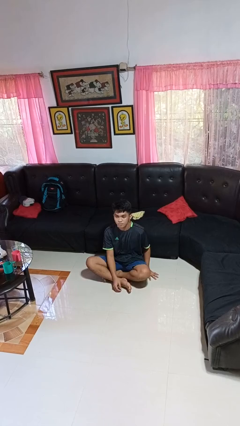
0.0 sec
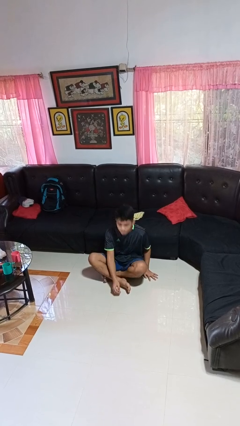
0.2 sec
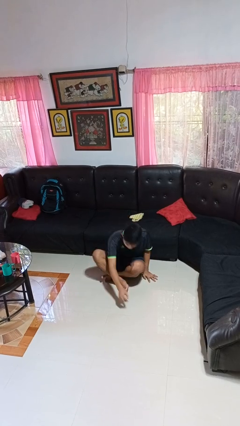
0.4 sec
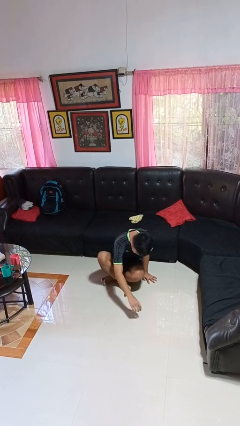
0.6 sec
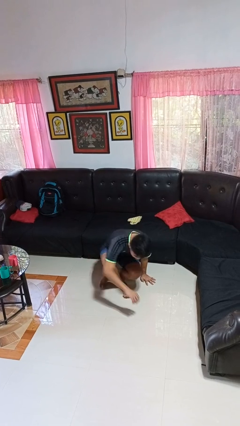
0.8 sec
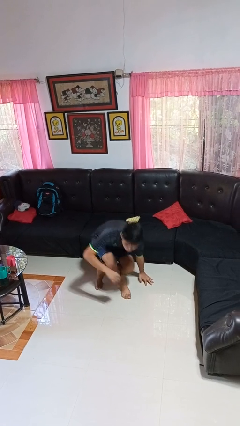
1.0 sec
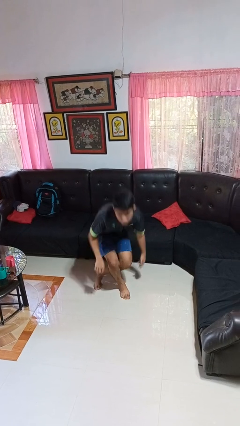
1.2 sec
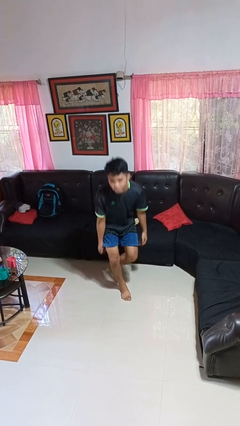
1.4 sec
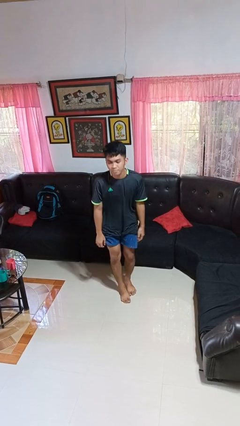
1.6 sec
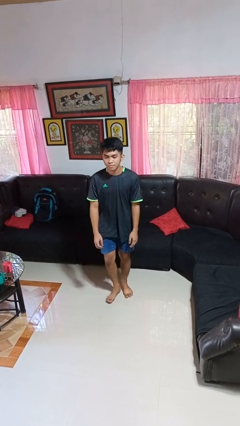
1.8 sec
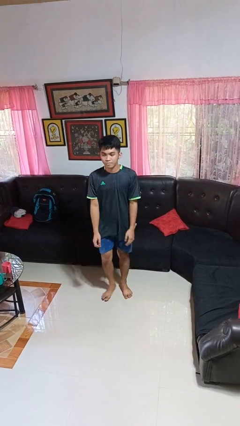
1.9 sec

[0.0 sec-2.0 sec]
person stands up from floor

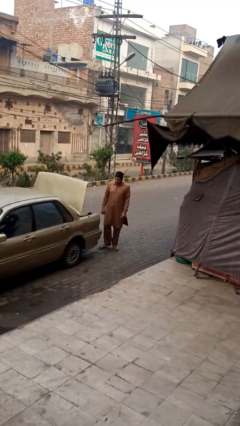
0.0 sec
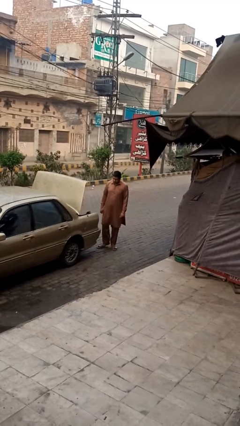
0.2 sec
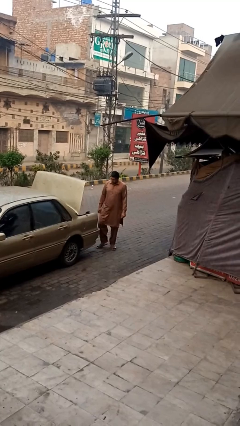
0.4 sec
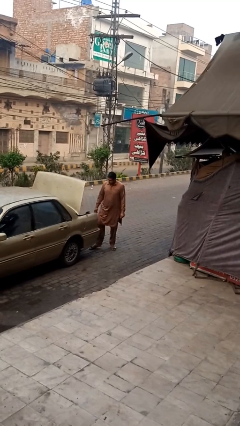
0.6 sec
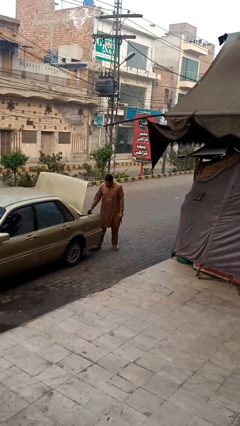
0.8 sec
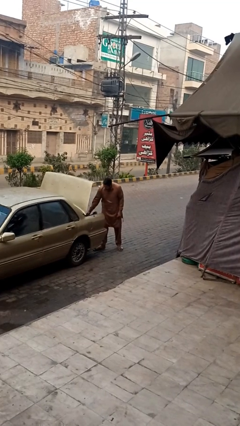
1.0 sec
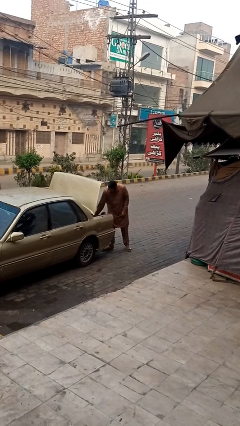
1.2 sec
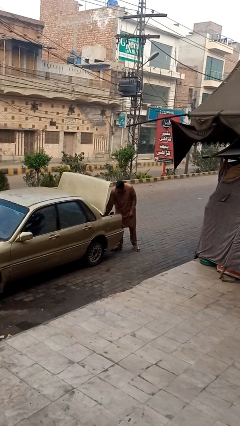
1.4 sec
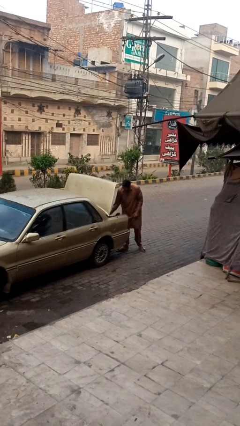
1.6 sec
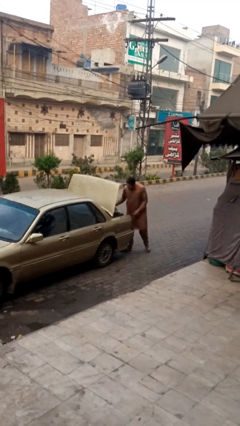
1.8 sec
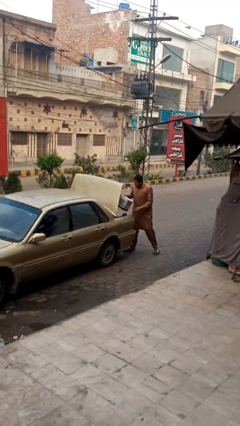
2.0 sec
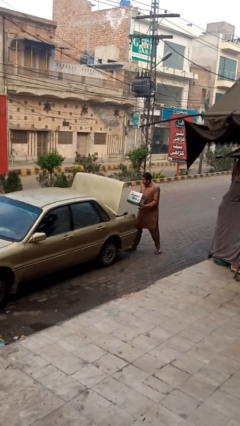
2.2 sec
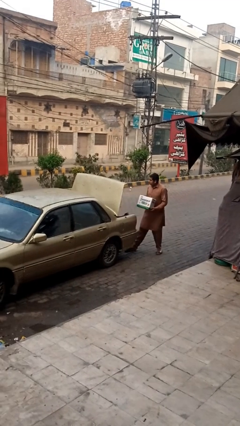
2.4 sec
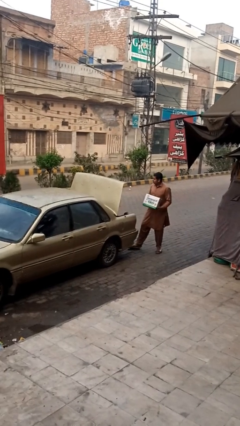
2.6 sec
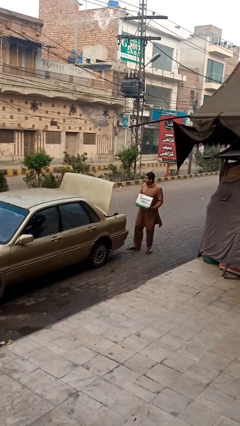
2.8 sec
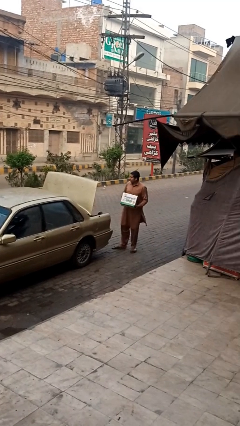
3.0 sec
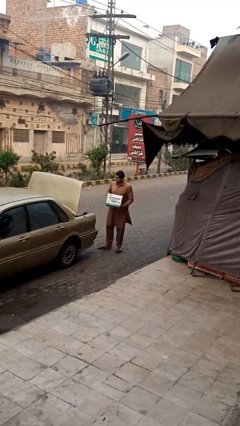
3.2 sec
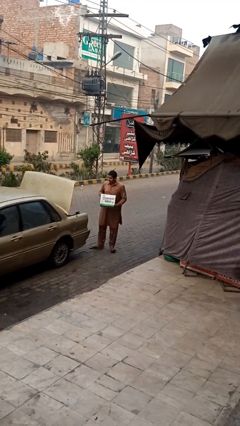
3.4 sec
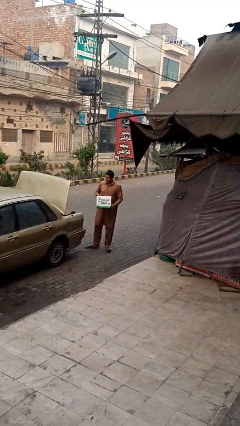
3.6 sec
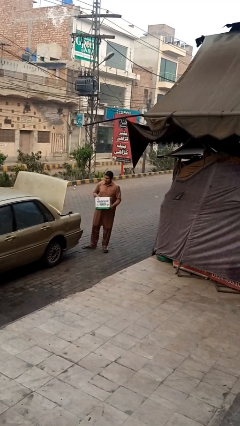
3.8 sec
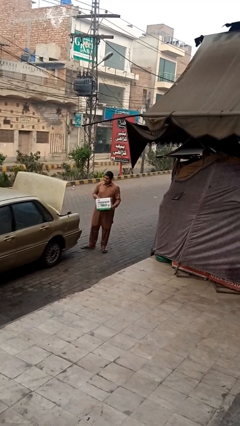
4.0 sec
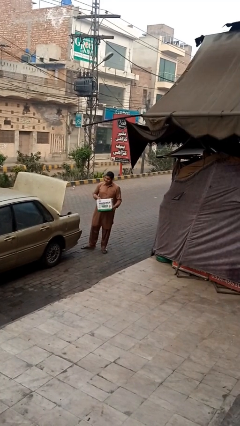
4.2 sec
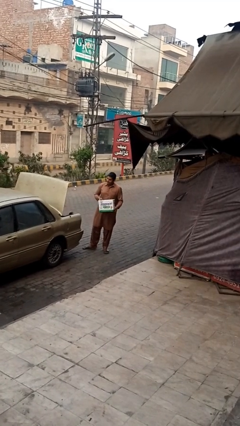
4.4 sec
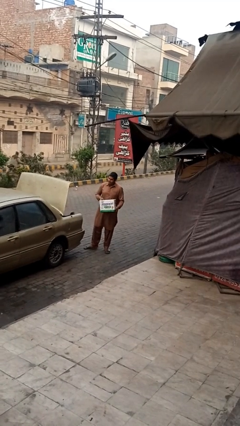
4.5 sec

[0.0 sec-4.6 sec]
person unloads car

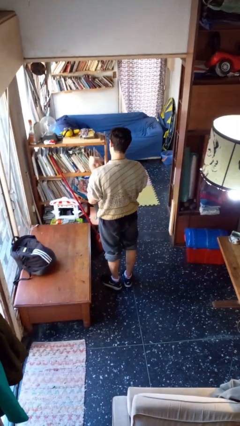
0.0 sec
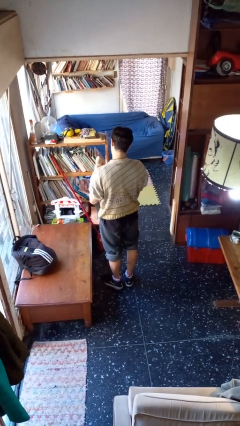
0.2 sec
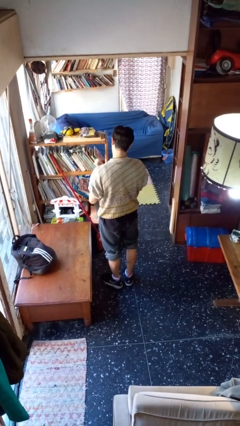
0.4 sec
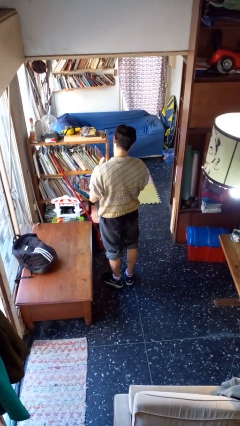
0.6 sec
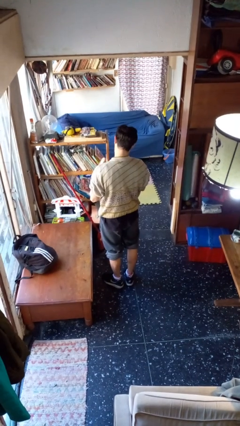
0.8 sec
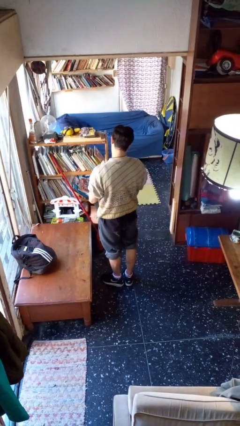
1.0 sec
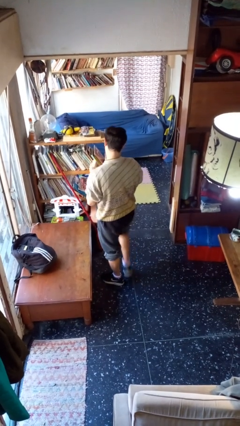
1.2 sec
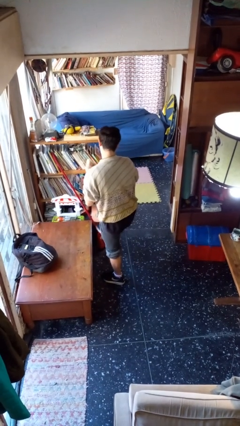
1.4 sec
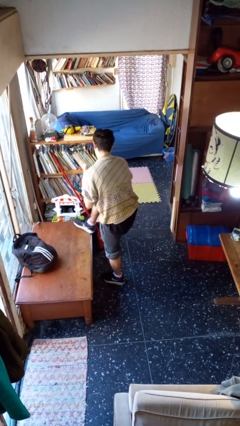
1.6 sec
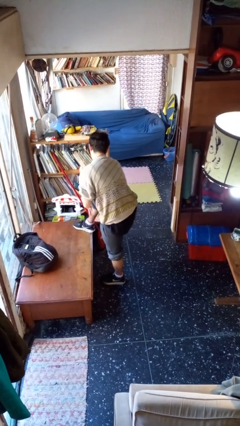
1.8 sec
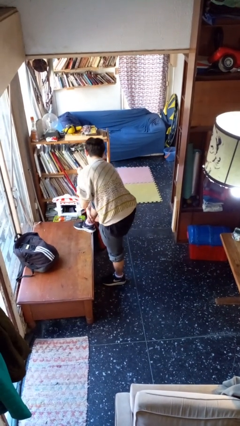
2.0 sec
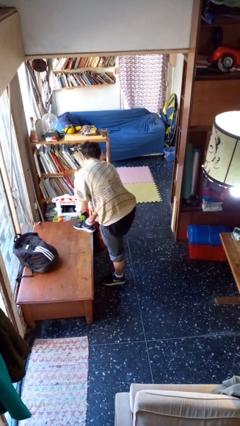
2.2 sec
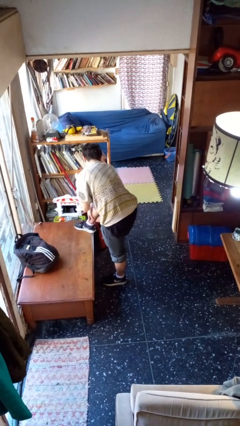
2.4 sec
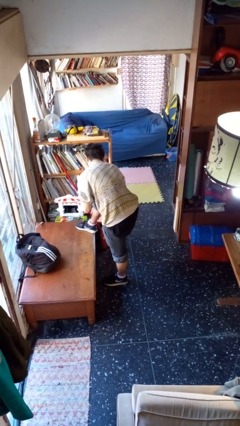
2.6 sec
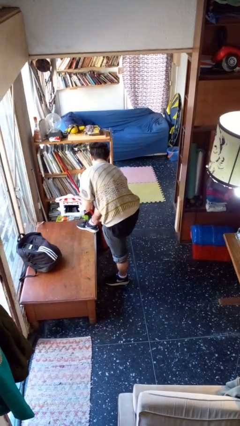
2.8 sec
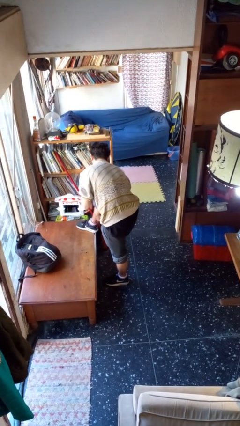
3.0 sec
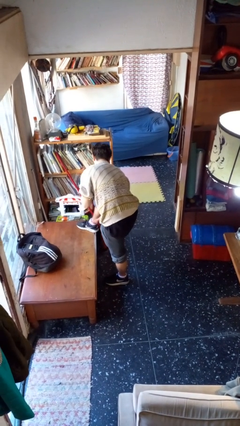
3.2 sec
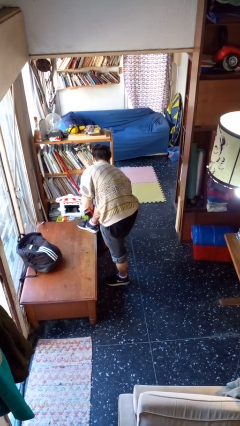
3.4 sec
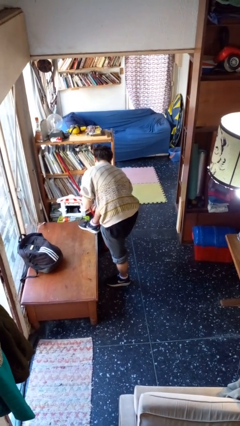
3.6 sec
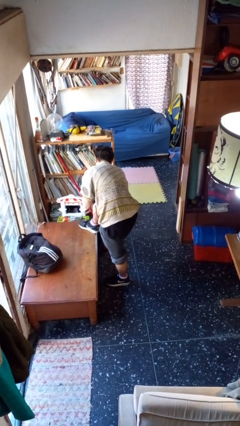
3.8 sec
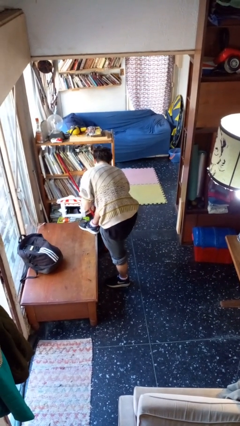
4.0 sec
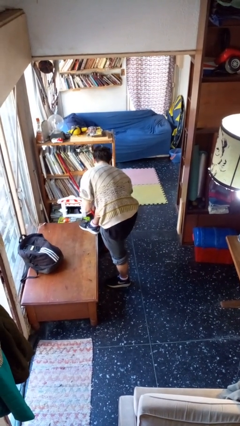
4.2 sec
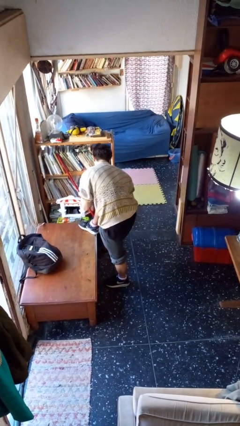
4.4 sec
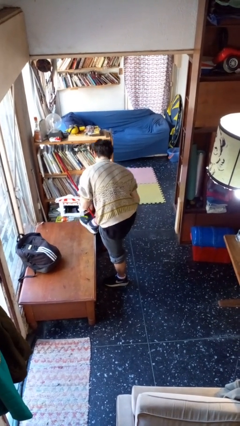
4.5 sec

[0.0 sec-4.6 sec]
person applies sunscreen

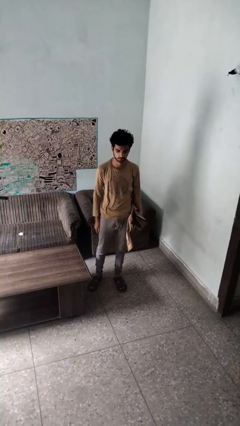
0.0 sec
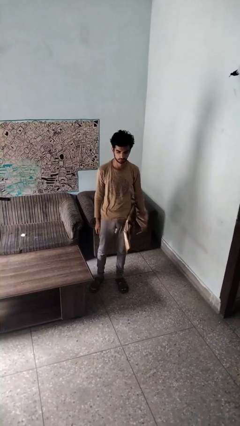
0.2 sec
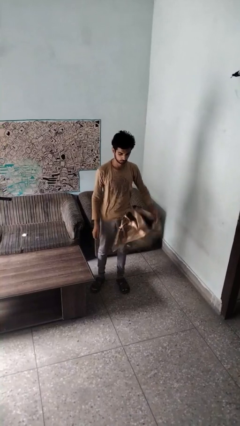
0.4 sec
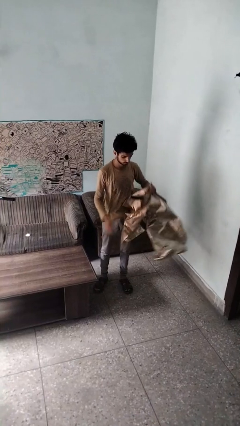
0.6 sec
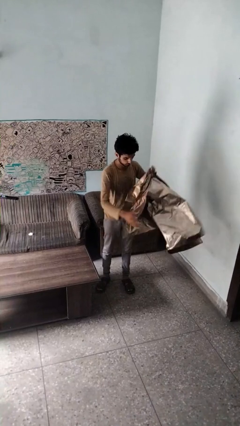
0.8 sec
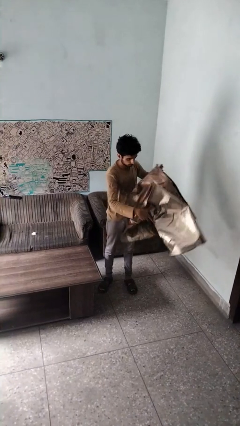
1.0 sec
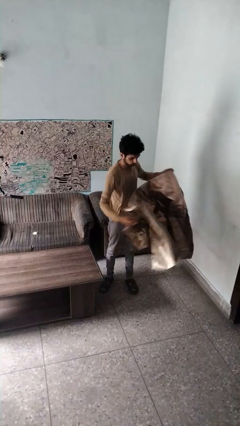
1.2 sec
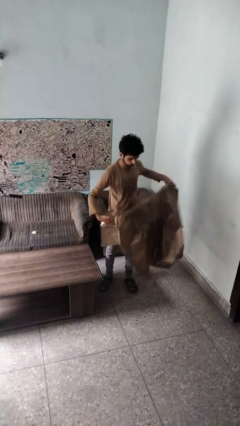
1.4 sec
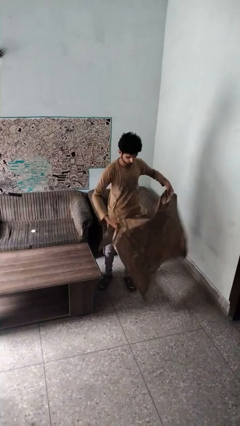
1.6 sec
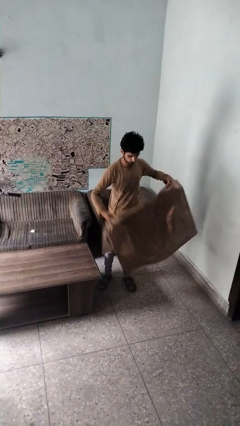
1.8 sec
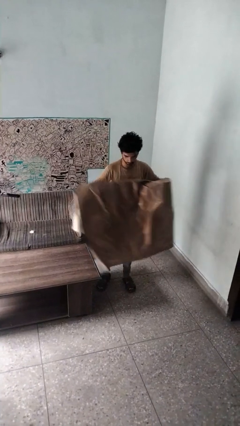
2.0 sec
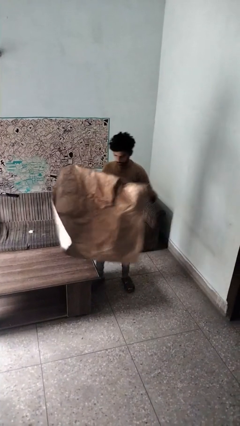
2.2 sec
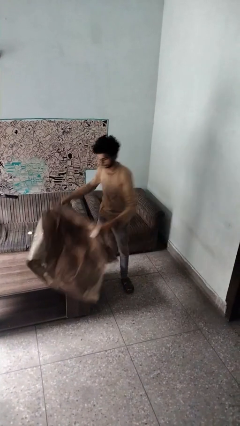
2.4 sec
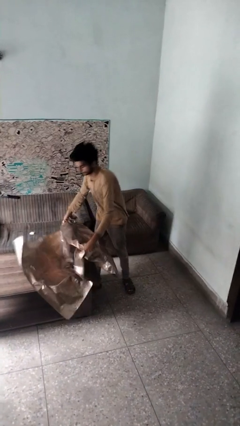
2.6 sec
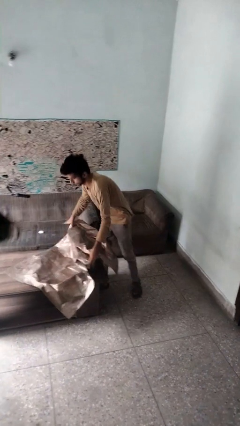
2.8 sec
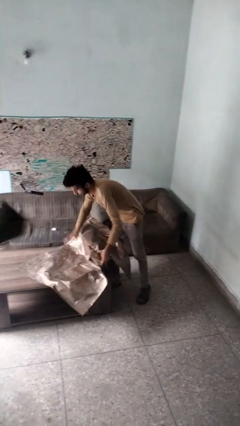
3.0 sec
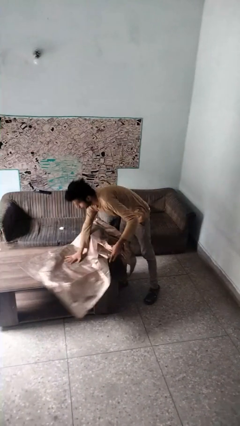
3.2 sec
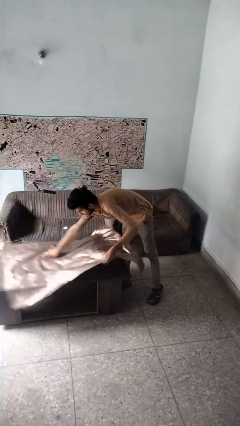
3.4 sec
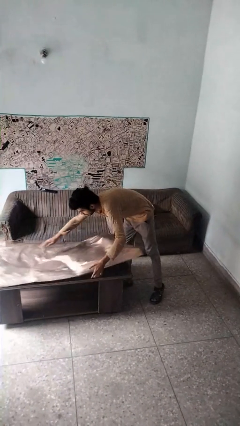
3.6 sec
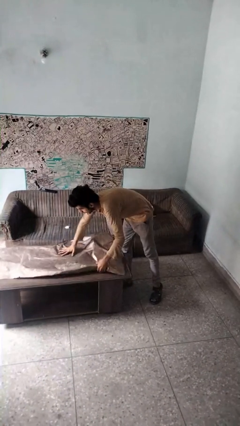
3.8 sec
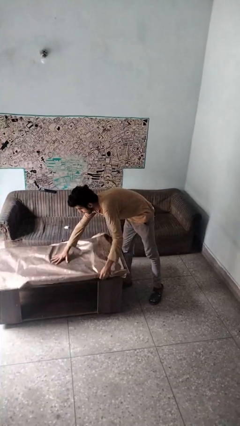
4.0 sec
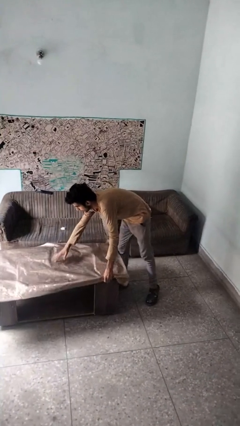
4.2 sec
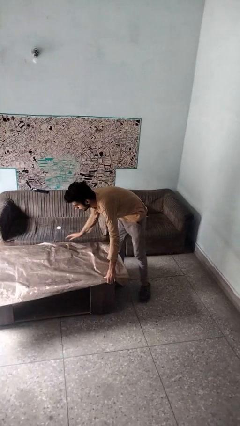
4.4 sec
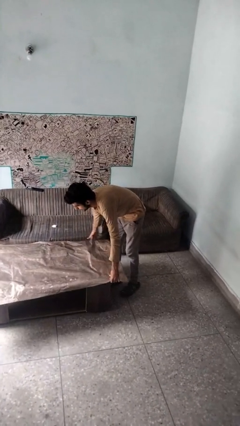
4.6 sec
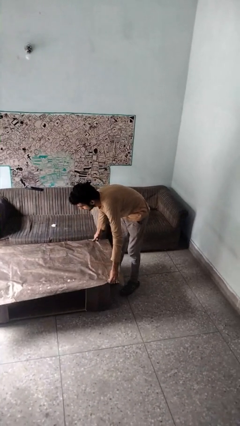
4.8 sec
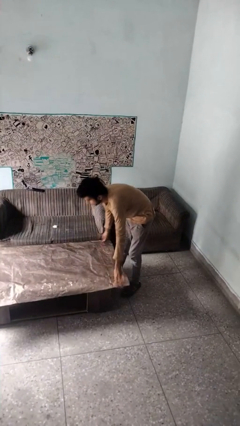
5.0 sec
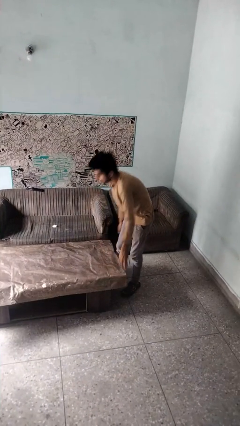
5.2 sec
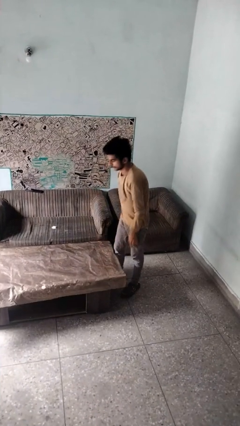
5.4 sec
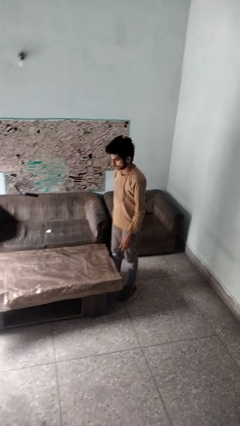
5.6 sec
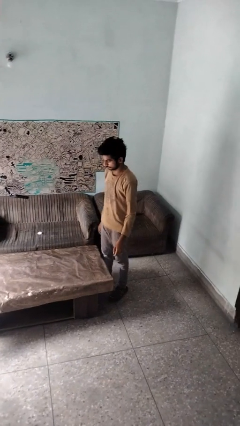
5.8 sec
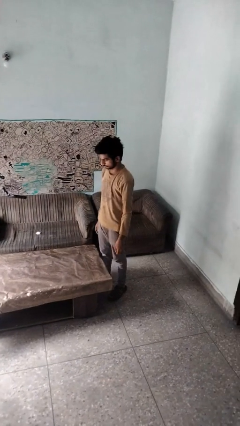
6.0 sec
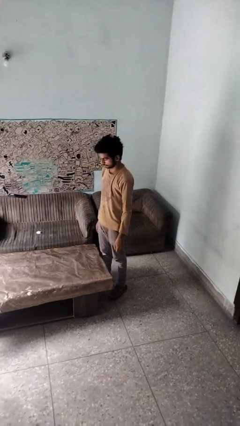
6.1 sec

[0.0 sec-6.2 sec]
person spreads tablecloth
